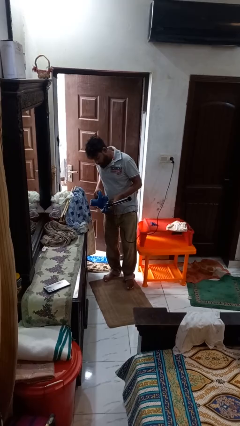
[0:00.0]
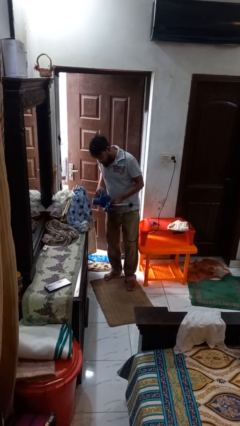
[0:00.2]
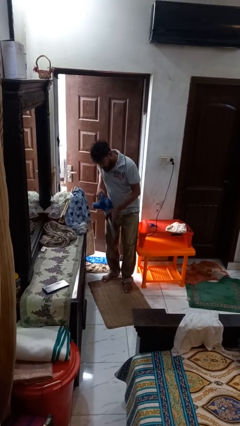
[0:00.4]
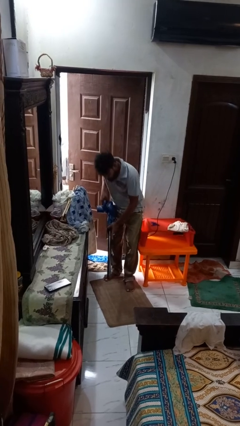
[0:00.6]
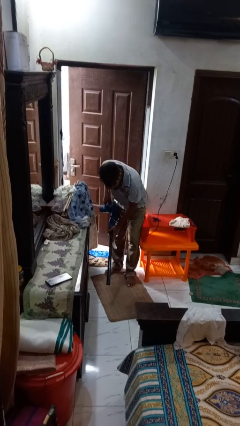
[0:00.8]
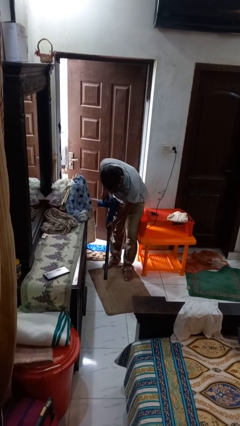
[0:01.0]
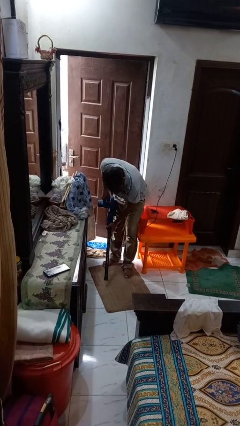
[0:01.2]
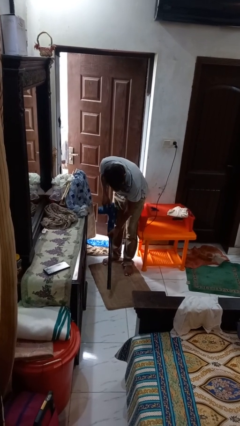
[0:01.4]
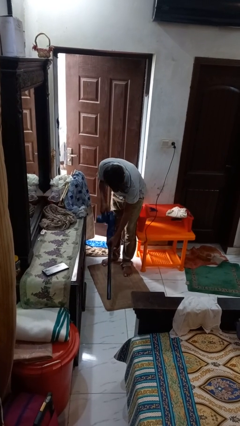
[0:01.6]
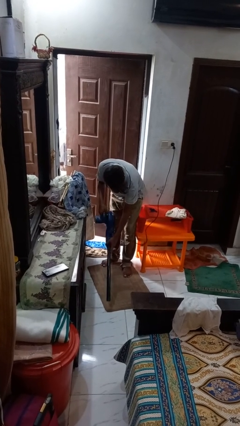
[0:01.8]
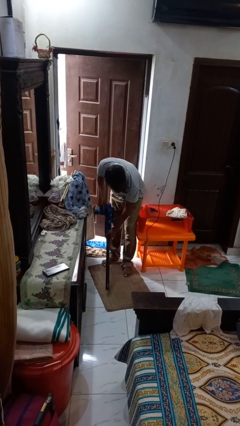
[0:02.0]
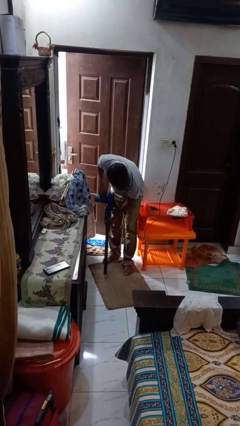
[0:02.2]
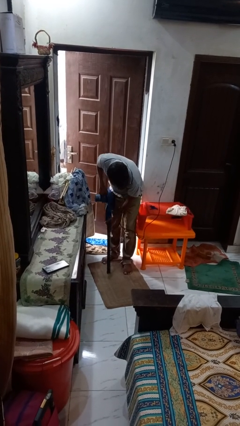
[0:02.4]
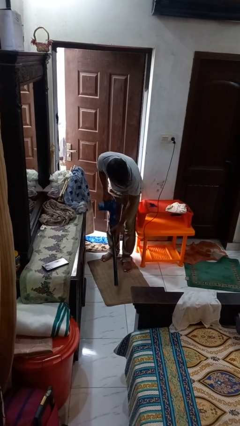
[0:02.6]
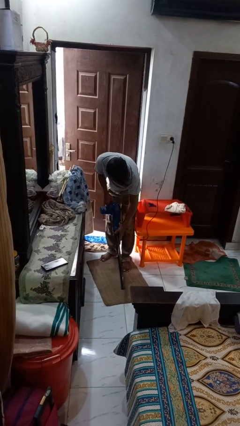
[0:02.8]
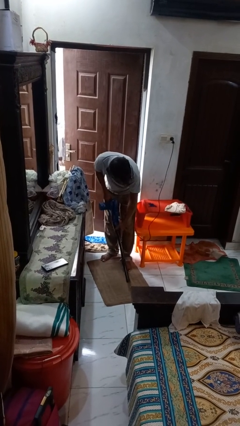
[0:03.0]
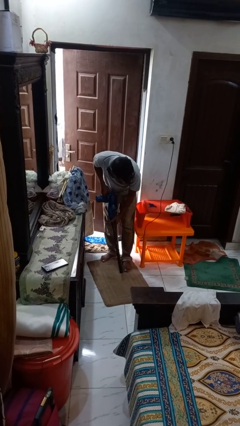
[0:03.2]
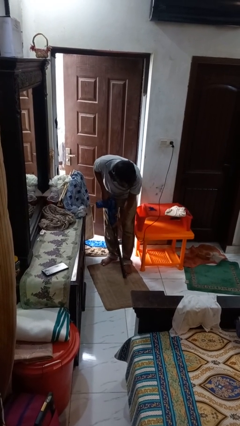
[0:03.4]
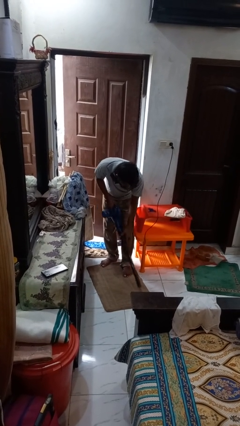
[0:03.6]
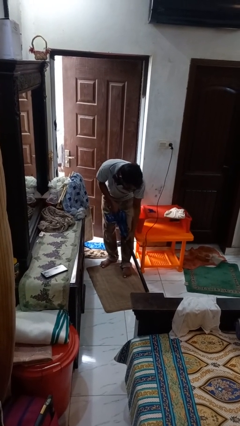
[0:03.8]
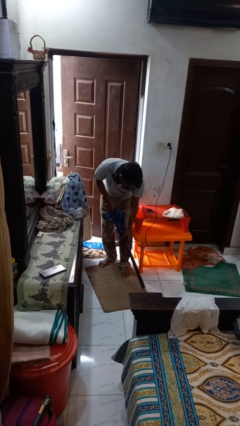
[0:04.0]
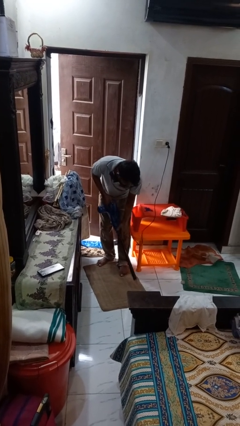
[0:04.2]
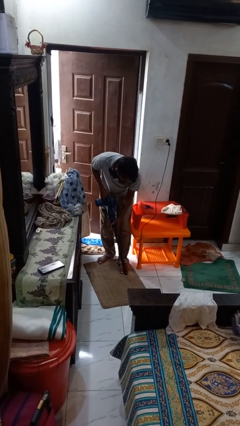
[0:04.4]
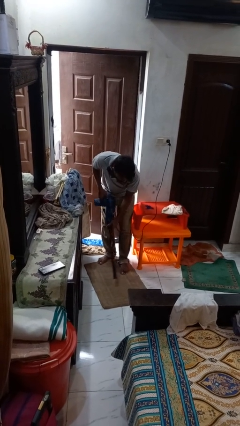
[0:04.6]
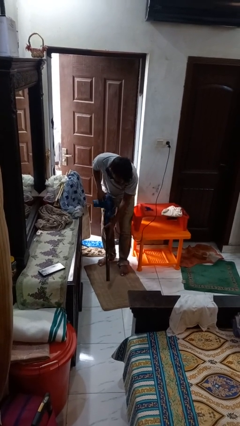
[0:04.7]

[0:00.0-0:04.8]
person vacuums carpet

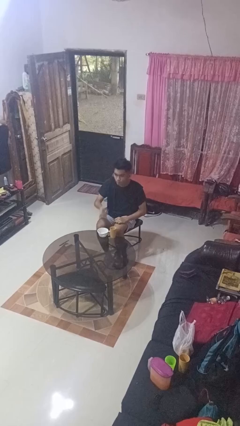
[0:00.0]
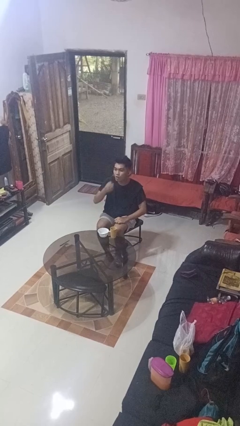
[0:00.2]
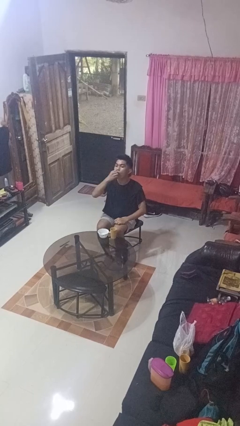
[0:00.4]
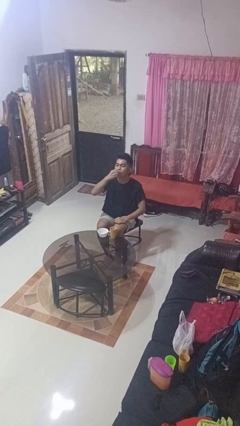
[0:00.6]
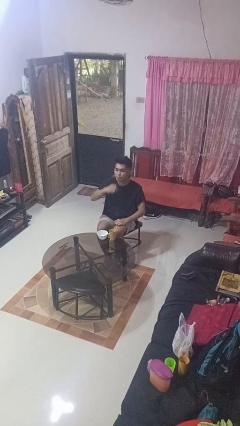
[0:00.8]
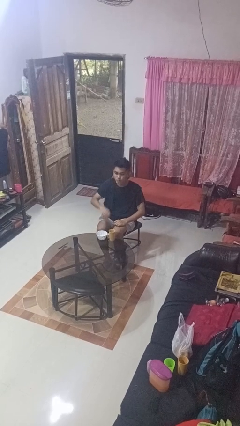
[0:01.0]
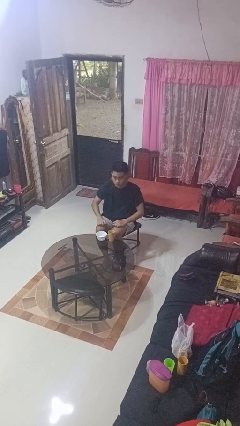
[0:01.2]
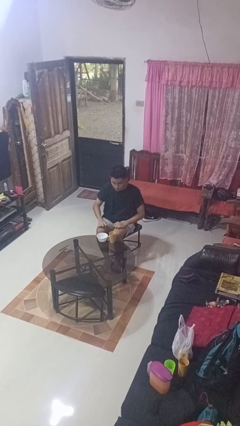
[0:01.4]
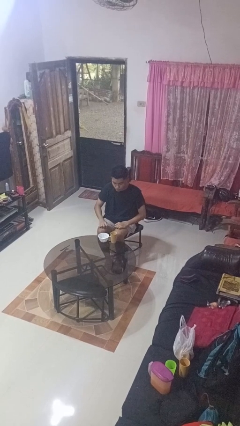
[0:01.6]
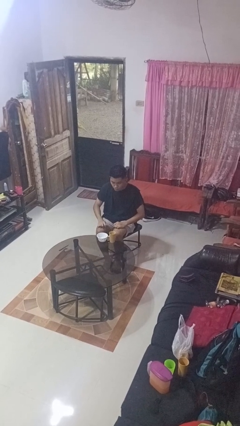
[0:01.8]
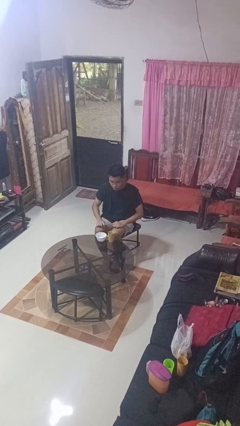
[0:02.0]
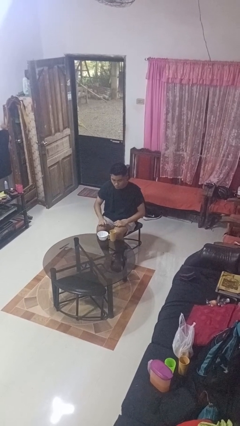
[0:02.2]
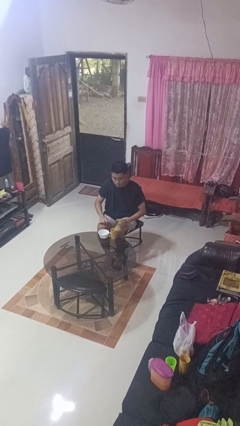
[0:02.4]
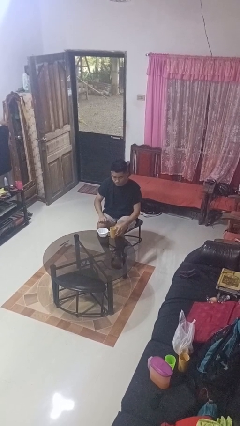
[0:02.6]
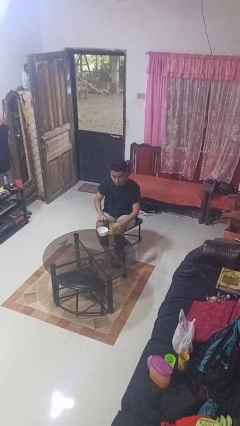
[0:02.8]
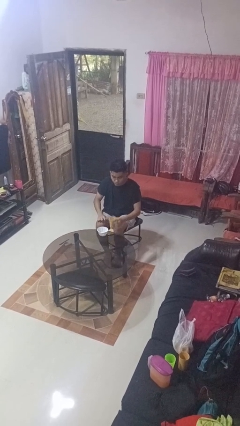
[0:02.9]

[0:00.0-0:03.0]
person takes medicine pills

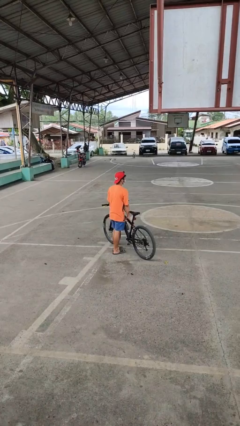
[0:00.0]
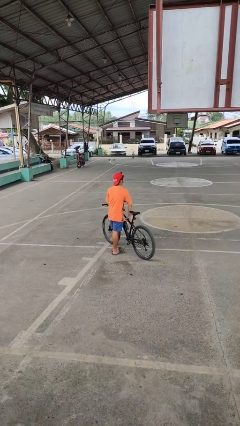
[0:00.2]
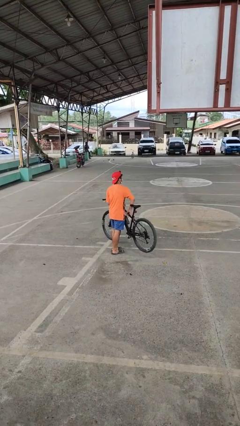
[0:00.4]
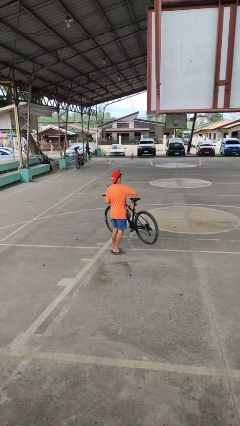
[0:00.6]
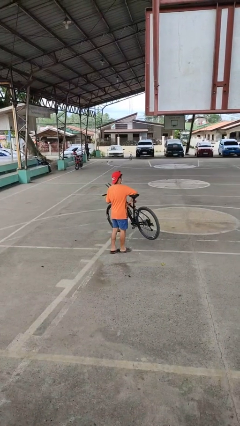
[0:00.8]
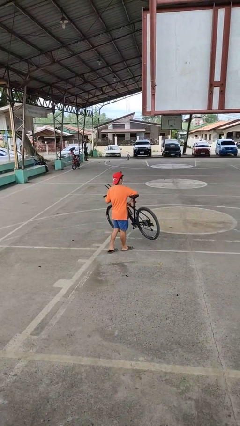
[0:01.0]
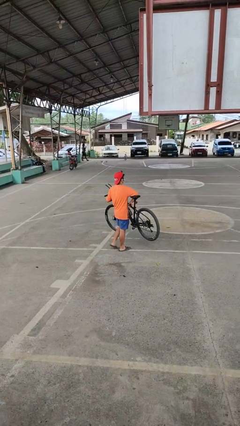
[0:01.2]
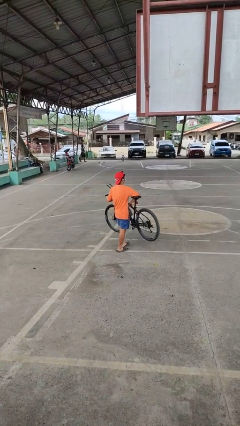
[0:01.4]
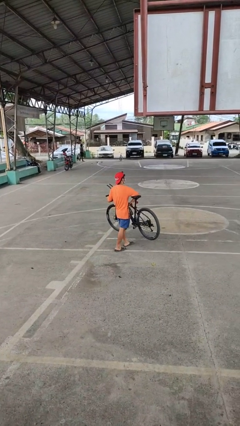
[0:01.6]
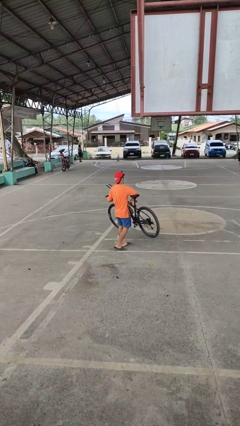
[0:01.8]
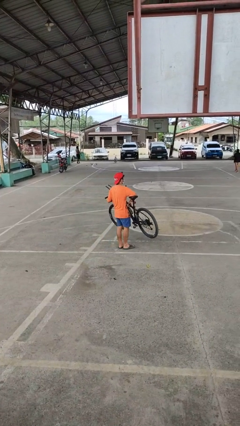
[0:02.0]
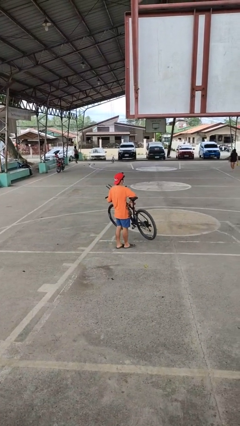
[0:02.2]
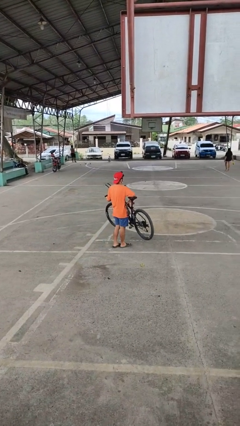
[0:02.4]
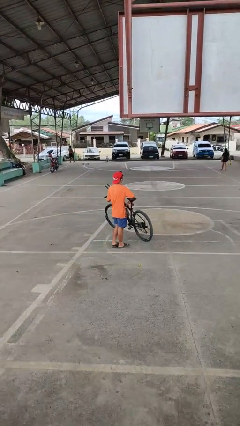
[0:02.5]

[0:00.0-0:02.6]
person carries bicycle

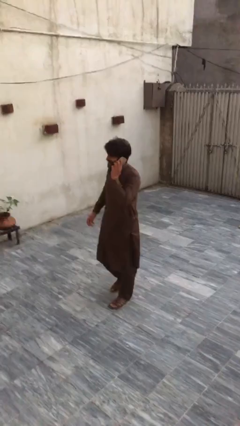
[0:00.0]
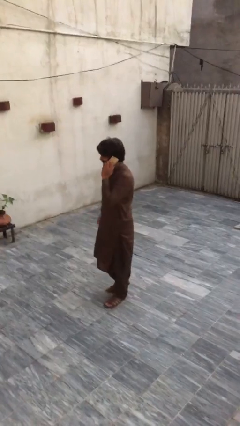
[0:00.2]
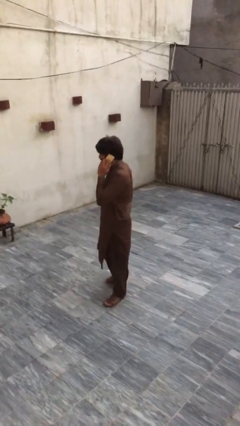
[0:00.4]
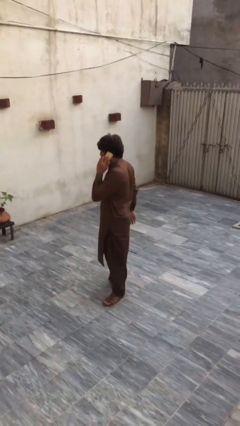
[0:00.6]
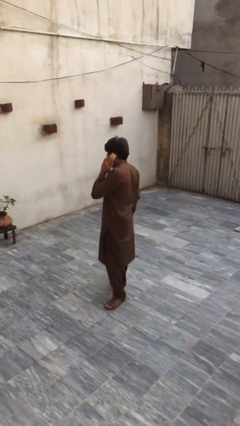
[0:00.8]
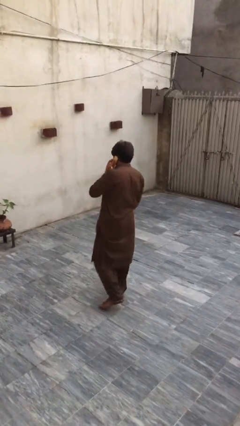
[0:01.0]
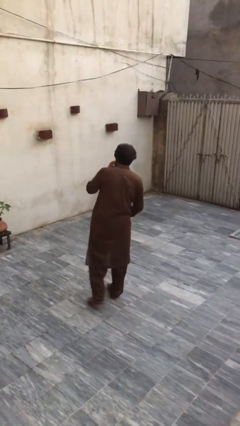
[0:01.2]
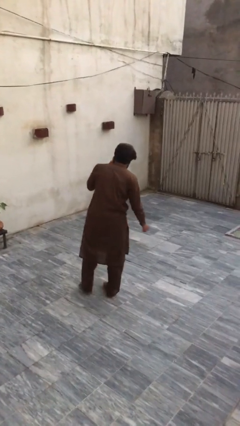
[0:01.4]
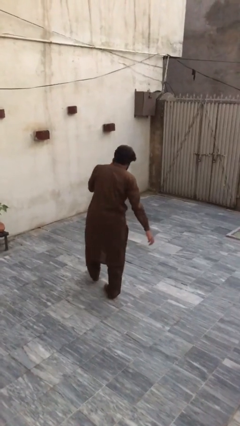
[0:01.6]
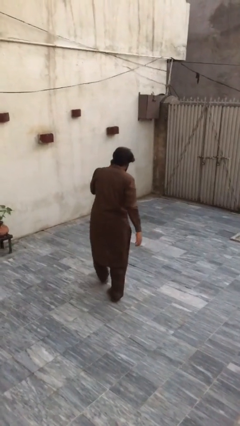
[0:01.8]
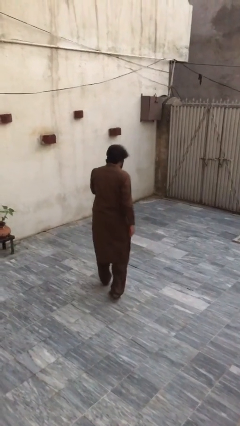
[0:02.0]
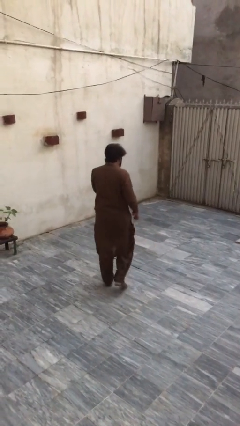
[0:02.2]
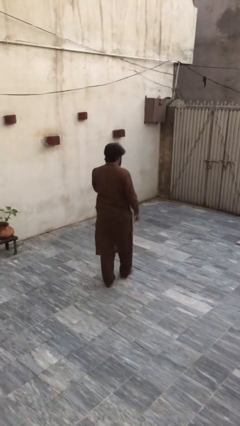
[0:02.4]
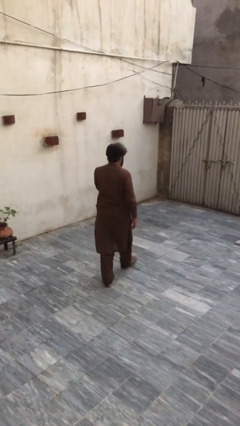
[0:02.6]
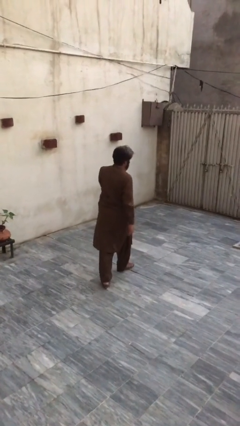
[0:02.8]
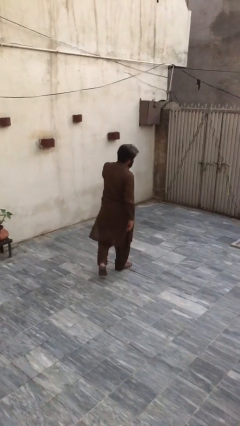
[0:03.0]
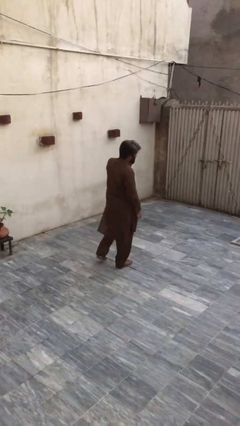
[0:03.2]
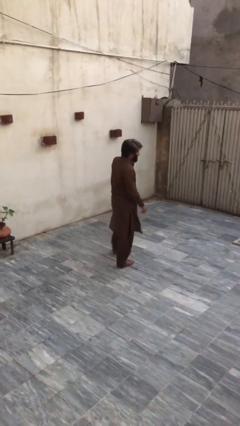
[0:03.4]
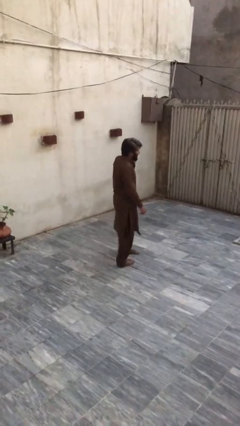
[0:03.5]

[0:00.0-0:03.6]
person talks on phone

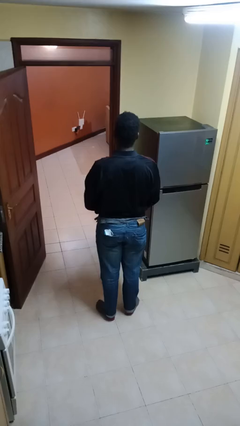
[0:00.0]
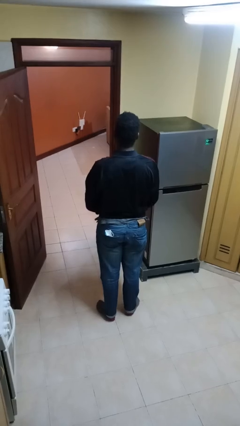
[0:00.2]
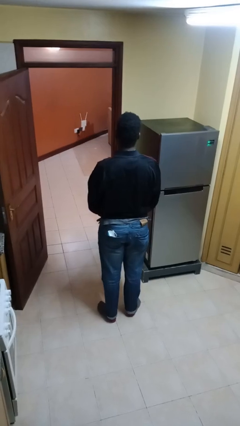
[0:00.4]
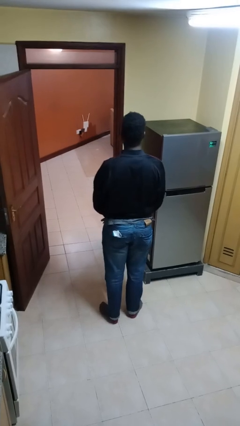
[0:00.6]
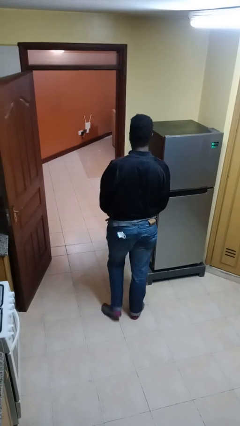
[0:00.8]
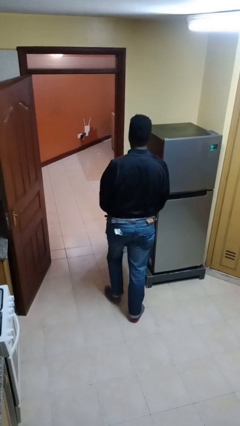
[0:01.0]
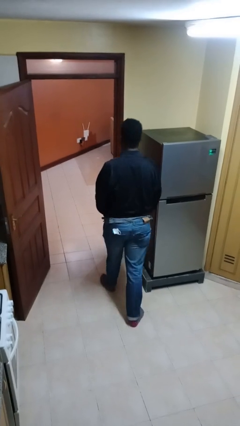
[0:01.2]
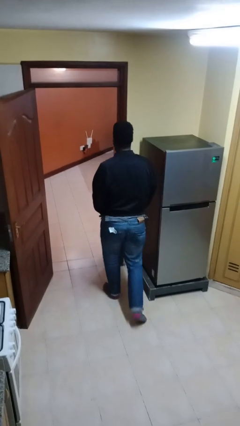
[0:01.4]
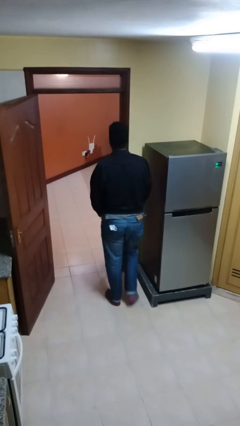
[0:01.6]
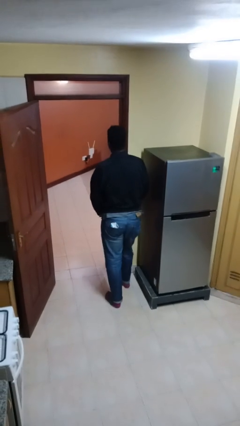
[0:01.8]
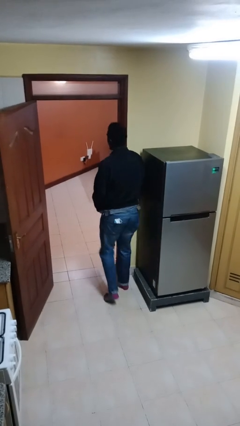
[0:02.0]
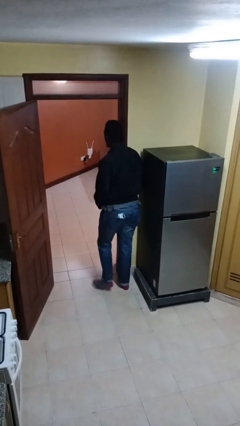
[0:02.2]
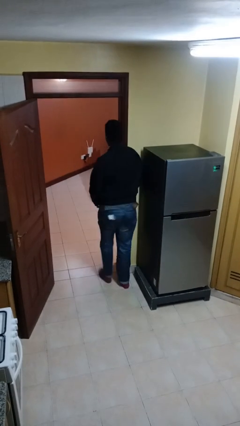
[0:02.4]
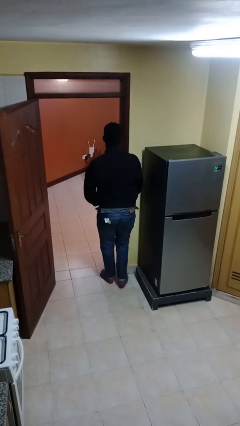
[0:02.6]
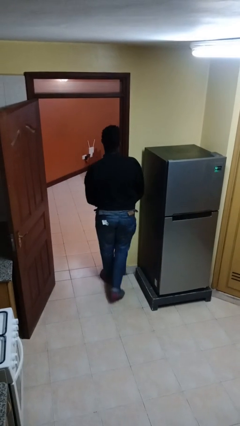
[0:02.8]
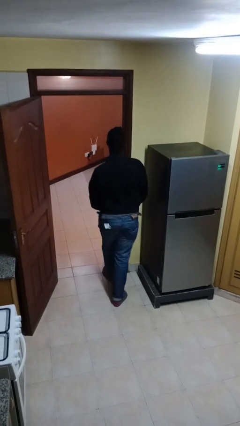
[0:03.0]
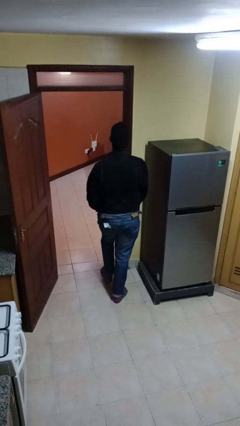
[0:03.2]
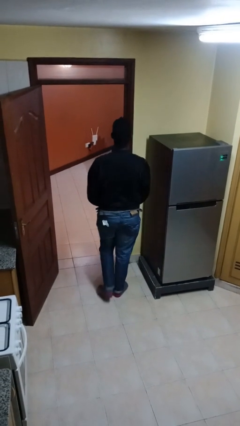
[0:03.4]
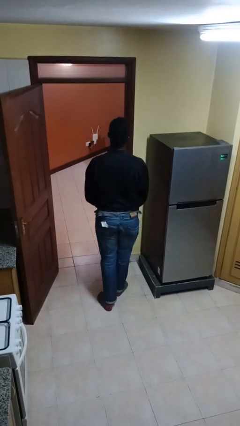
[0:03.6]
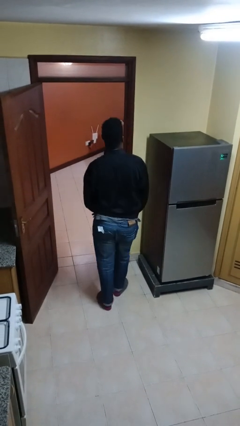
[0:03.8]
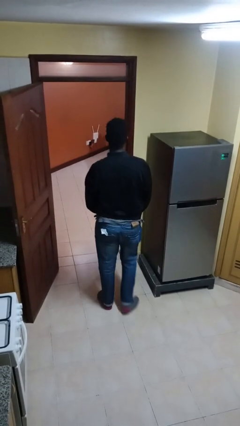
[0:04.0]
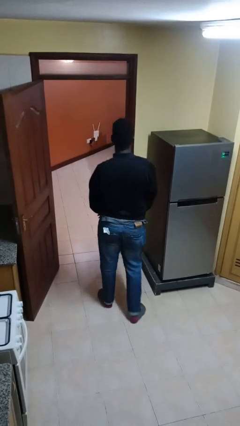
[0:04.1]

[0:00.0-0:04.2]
person bumps into wall
